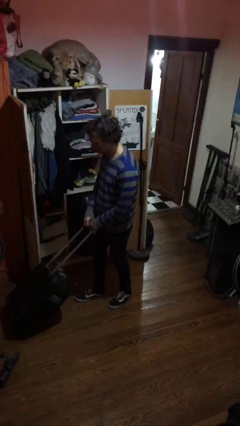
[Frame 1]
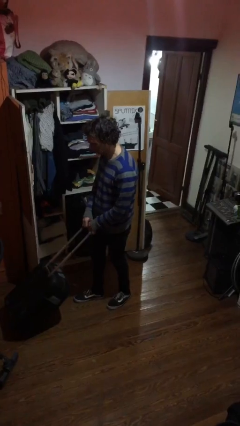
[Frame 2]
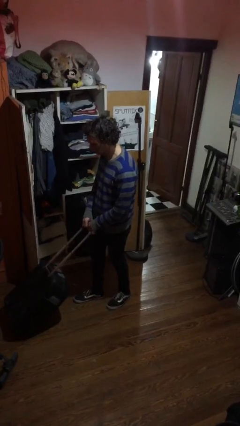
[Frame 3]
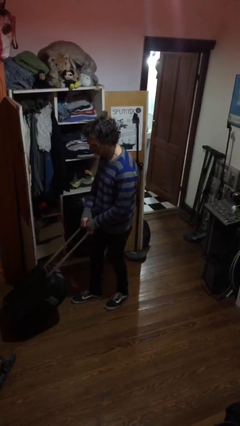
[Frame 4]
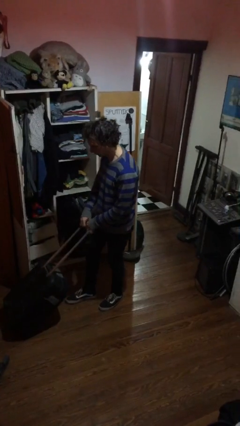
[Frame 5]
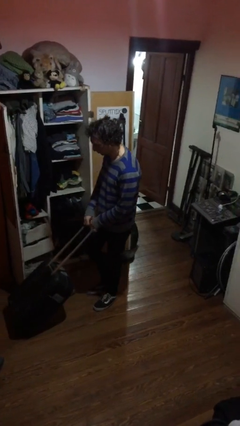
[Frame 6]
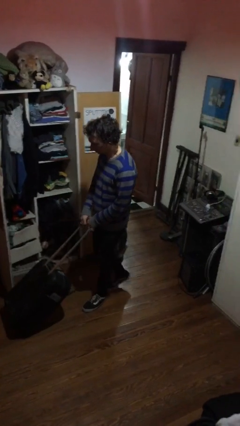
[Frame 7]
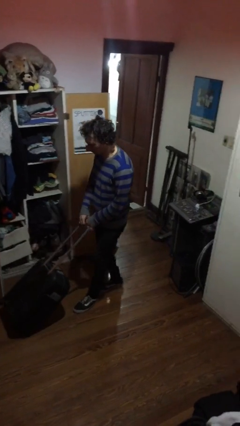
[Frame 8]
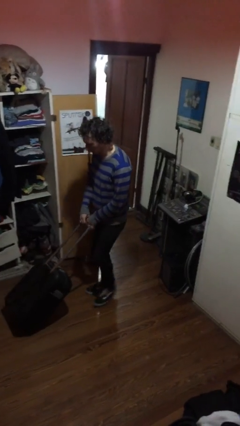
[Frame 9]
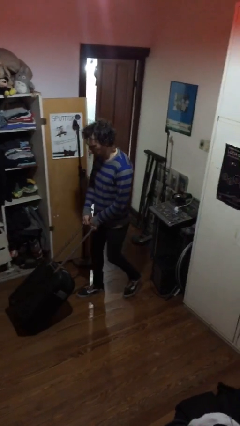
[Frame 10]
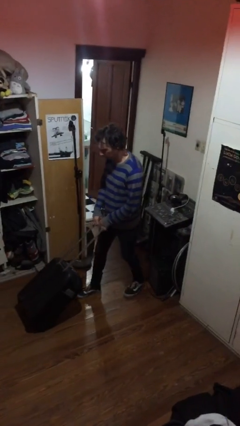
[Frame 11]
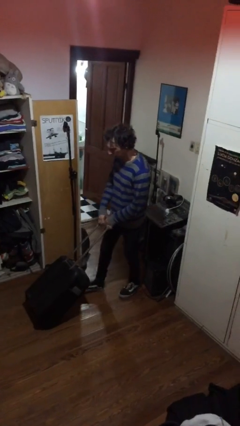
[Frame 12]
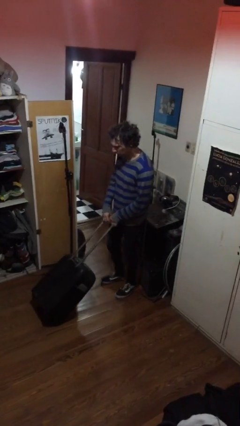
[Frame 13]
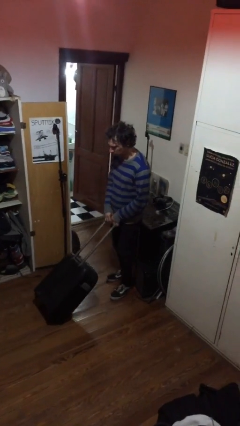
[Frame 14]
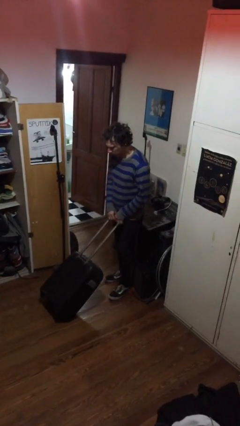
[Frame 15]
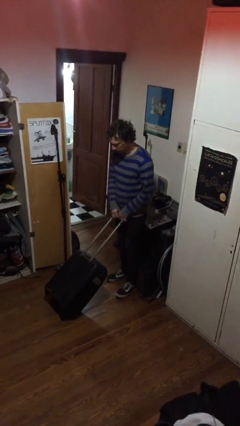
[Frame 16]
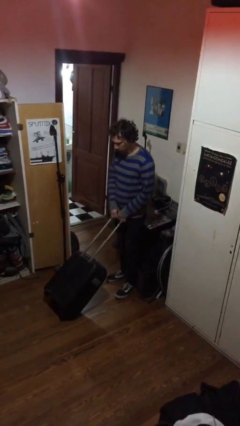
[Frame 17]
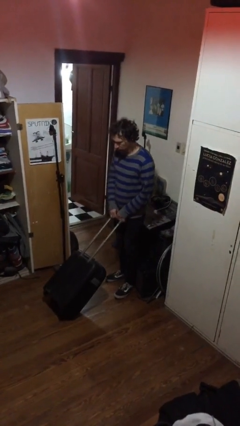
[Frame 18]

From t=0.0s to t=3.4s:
person pulls wheeled cart

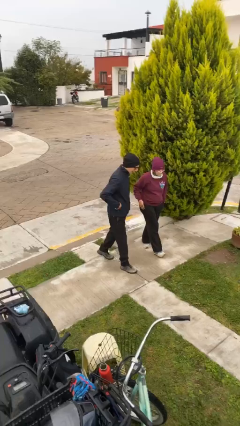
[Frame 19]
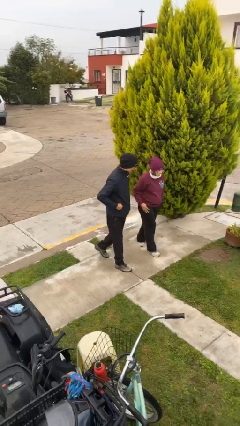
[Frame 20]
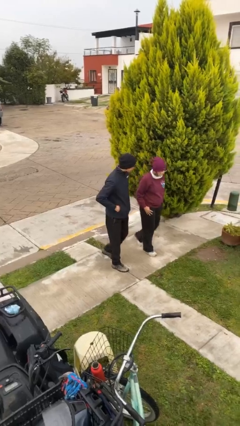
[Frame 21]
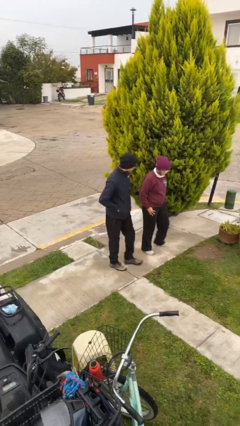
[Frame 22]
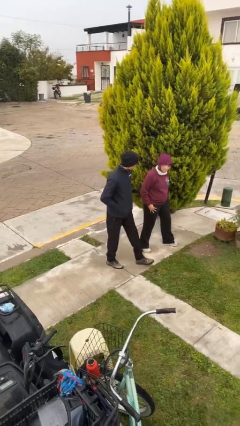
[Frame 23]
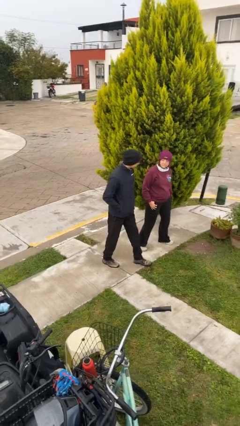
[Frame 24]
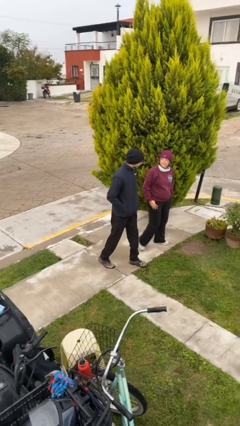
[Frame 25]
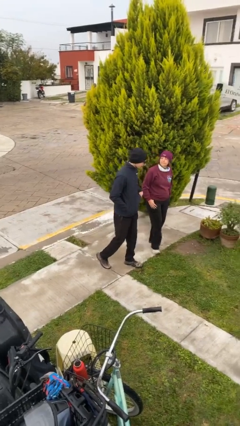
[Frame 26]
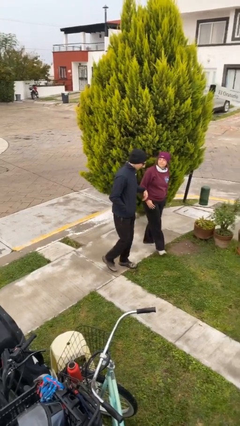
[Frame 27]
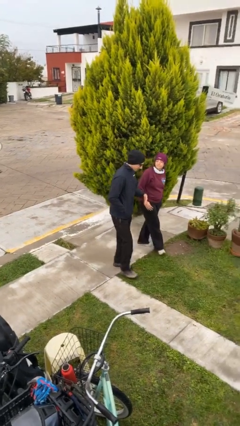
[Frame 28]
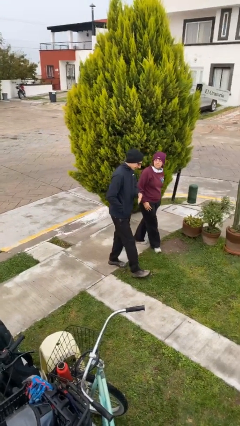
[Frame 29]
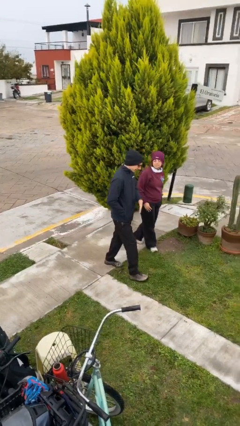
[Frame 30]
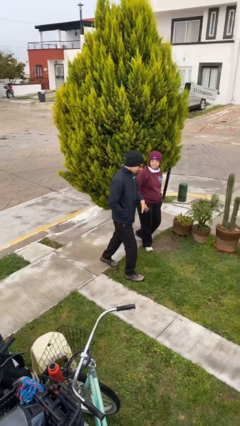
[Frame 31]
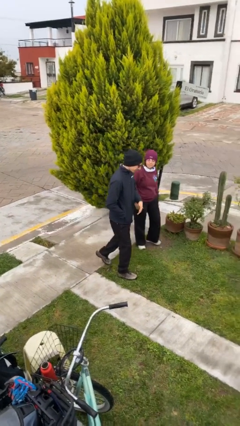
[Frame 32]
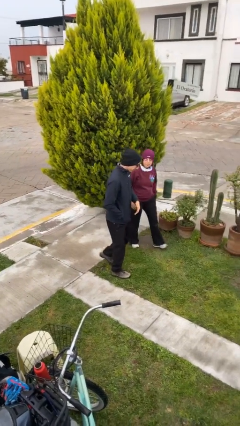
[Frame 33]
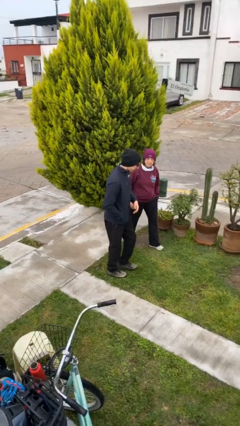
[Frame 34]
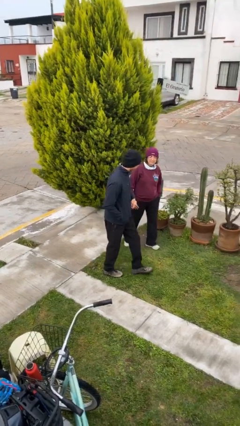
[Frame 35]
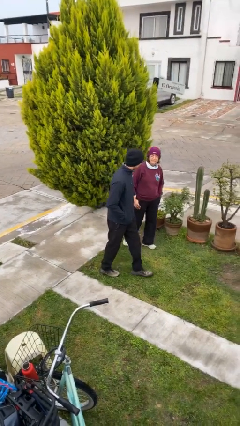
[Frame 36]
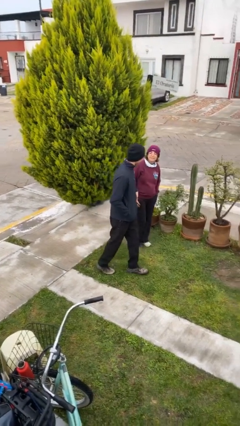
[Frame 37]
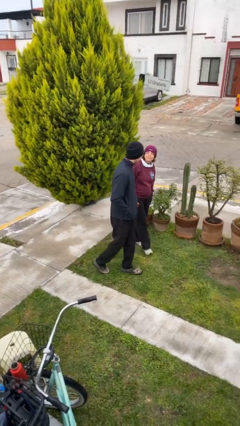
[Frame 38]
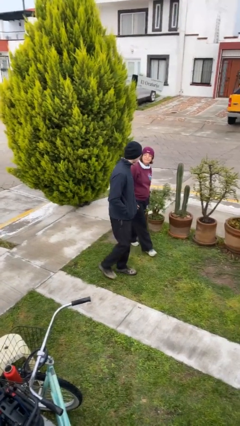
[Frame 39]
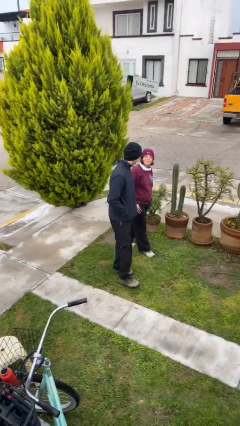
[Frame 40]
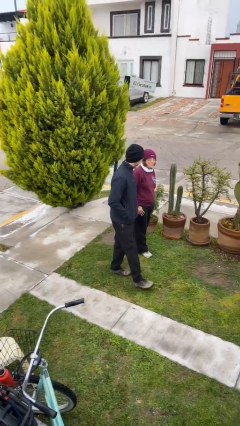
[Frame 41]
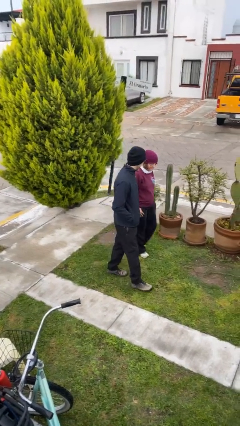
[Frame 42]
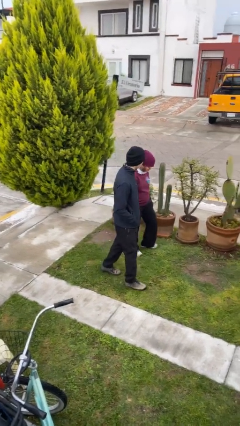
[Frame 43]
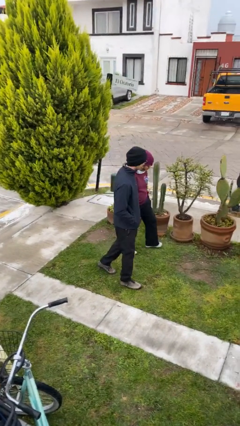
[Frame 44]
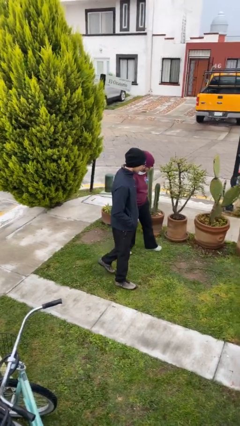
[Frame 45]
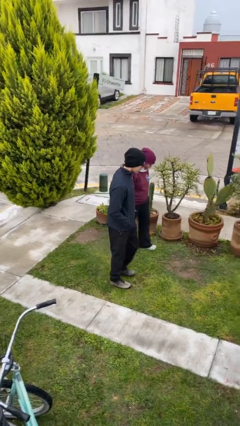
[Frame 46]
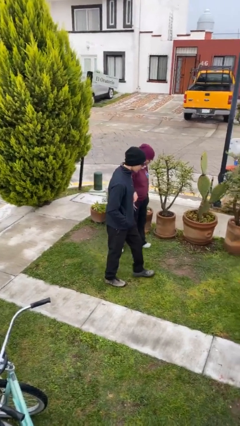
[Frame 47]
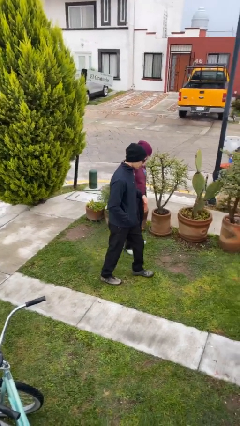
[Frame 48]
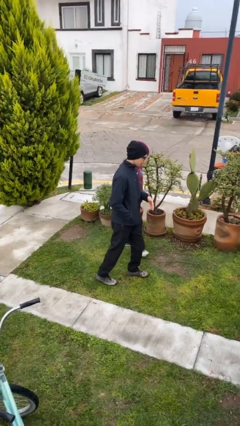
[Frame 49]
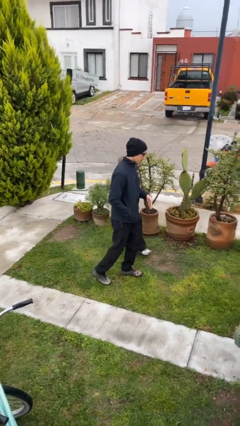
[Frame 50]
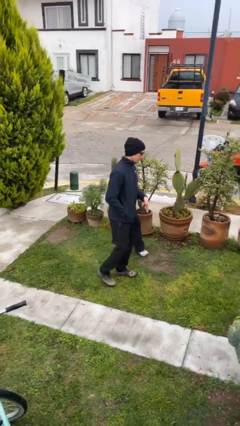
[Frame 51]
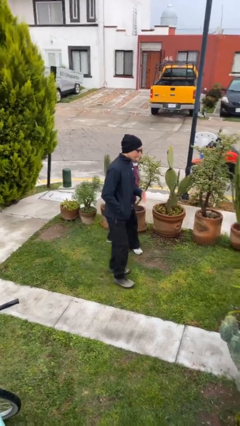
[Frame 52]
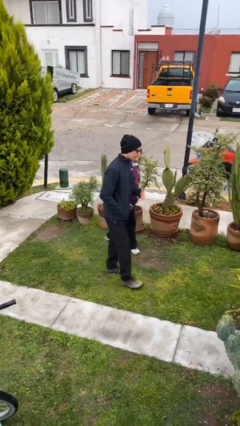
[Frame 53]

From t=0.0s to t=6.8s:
person talks to person

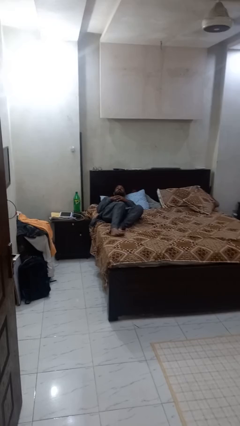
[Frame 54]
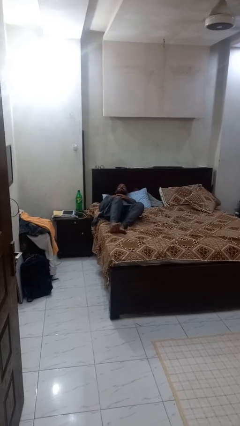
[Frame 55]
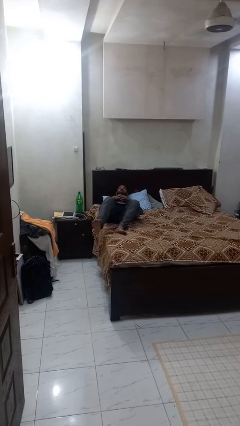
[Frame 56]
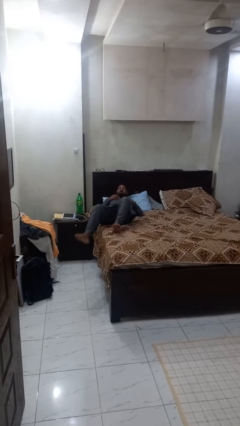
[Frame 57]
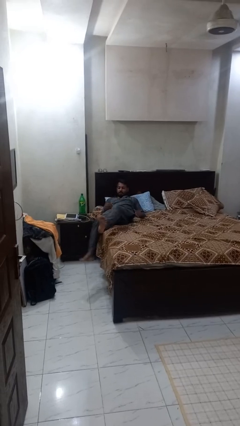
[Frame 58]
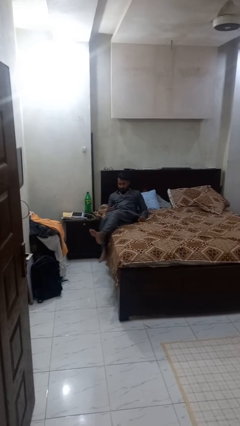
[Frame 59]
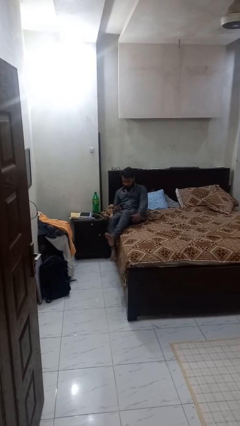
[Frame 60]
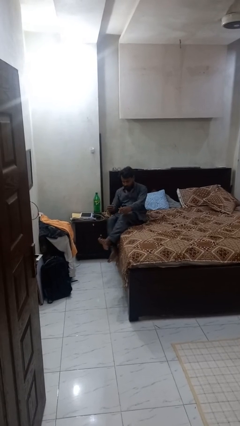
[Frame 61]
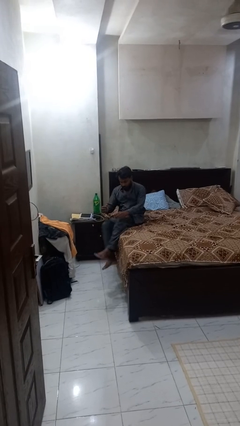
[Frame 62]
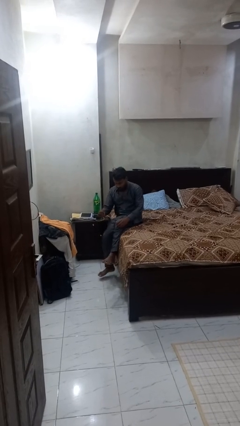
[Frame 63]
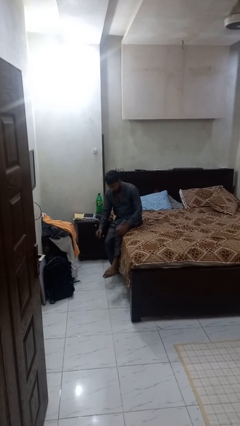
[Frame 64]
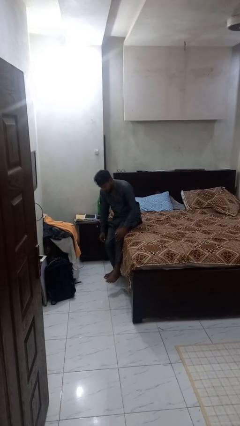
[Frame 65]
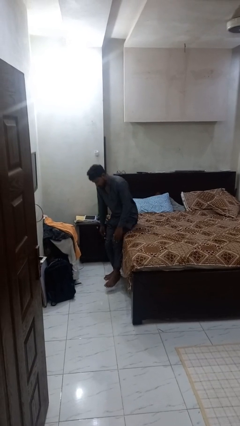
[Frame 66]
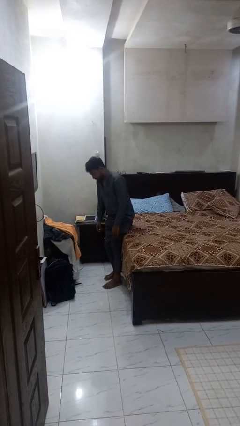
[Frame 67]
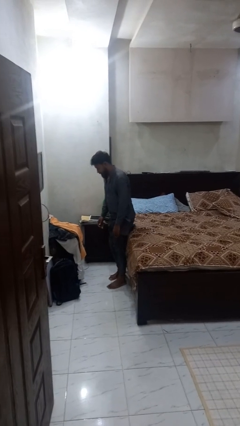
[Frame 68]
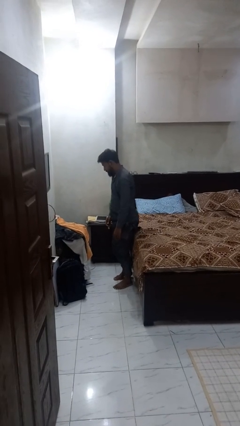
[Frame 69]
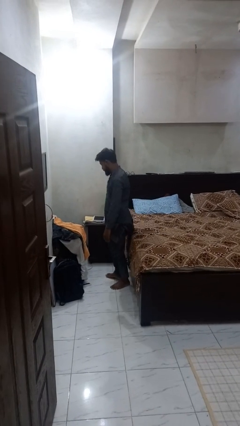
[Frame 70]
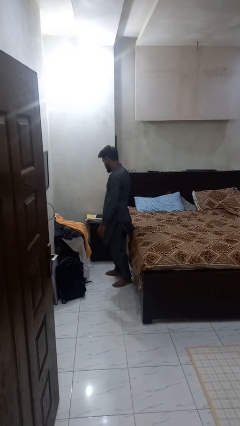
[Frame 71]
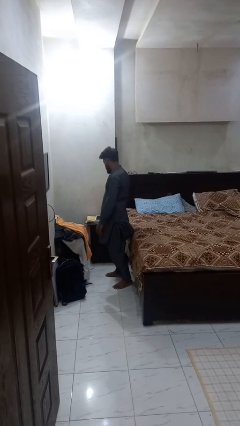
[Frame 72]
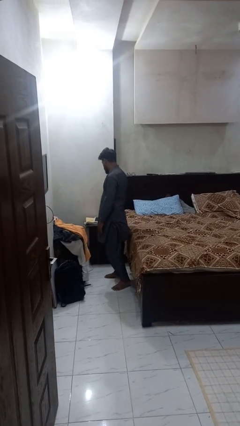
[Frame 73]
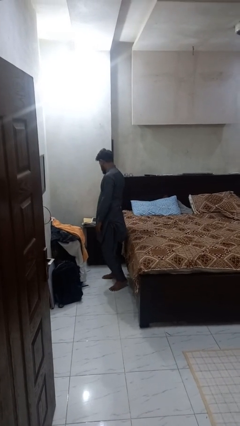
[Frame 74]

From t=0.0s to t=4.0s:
person stands up

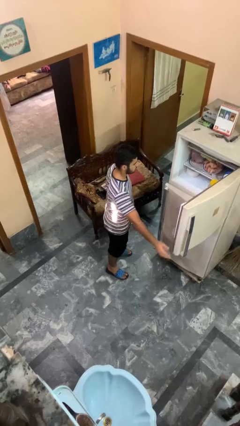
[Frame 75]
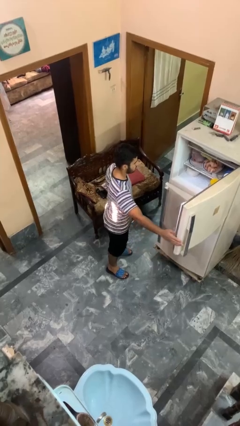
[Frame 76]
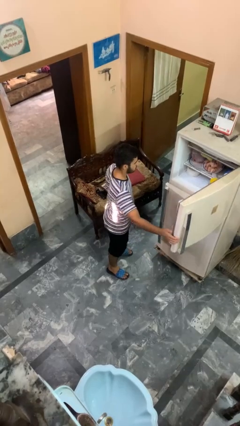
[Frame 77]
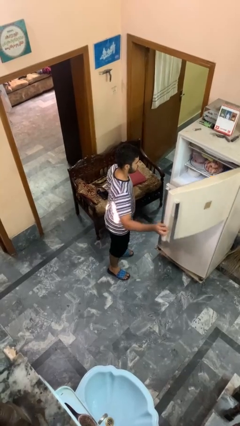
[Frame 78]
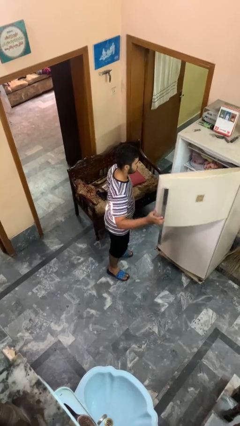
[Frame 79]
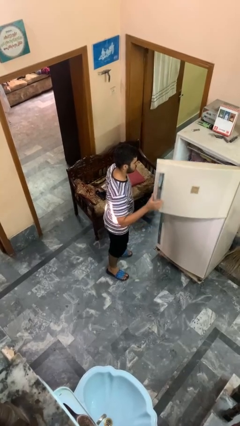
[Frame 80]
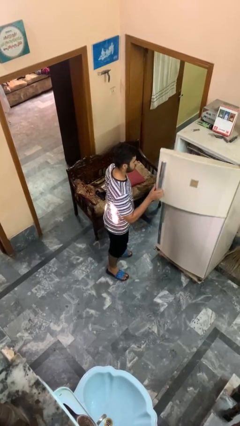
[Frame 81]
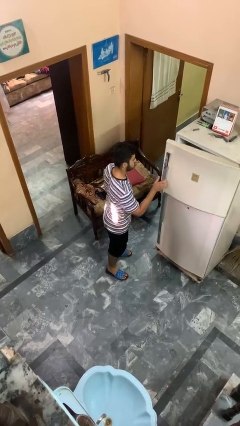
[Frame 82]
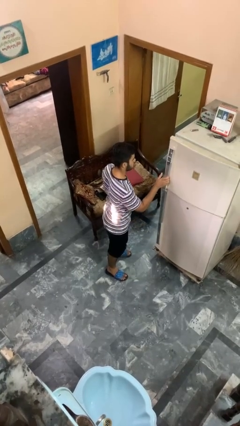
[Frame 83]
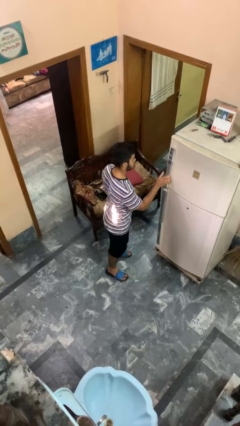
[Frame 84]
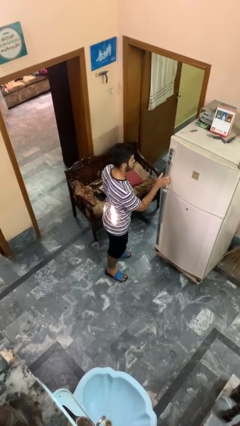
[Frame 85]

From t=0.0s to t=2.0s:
person closes refrigerator

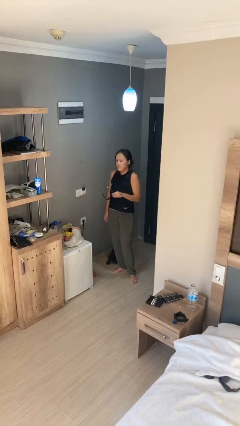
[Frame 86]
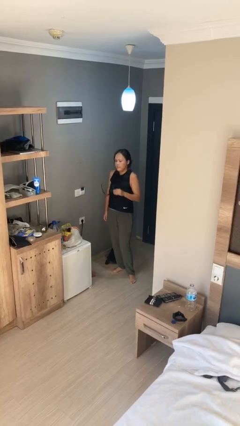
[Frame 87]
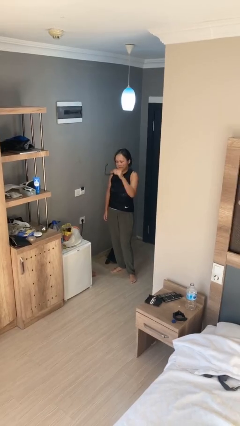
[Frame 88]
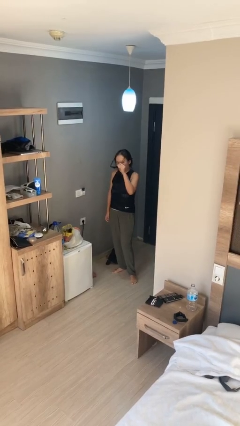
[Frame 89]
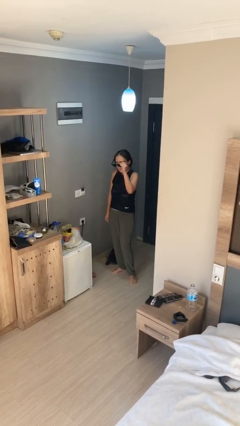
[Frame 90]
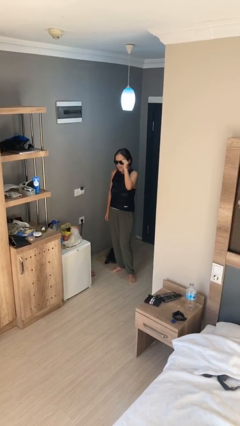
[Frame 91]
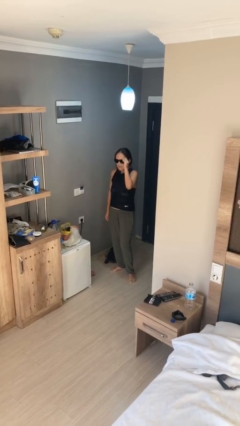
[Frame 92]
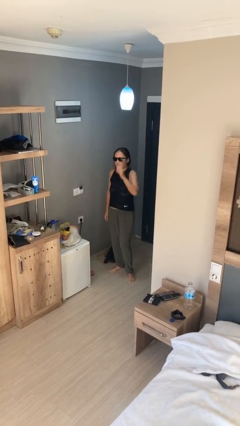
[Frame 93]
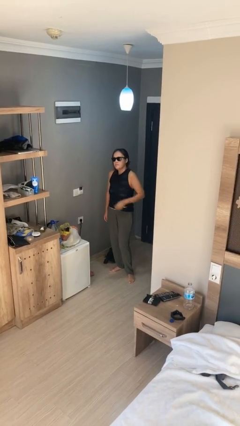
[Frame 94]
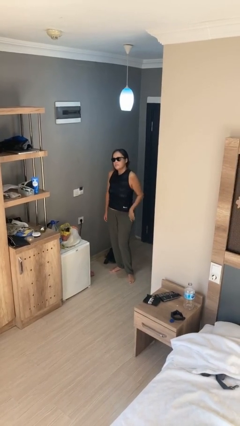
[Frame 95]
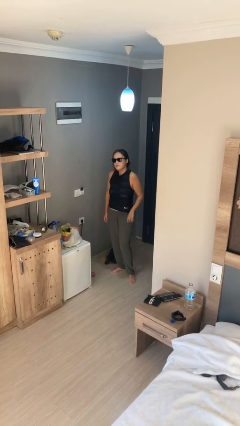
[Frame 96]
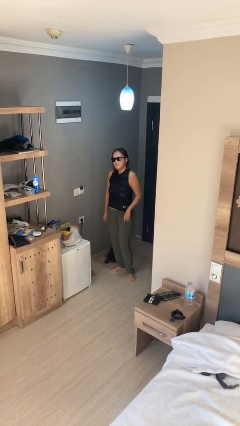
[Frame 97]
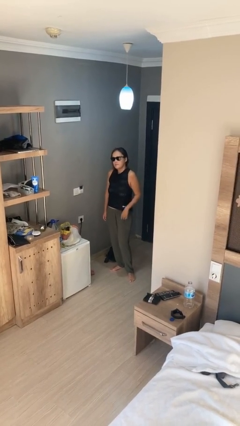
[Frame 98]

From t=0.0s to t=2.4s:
person puts on sunglasses
